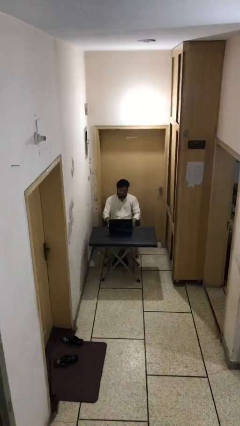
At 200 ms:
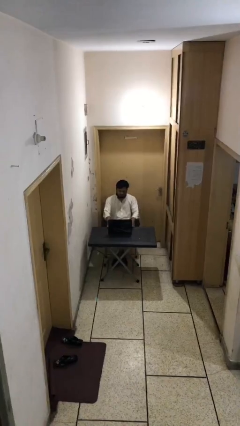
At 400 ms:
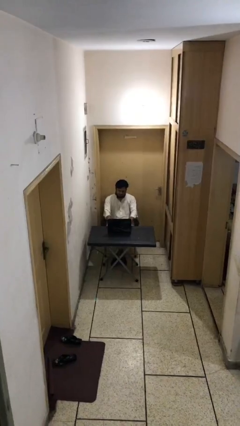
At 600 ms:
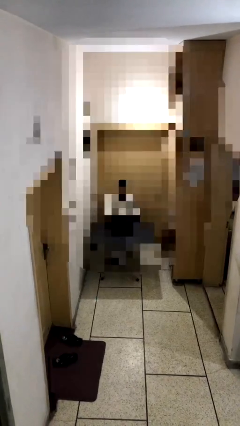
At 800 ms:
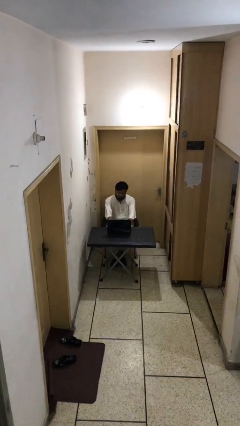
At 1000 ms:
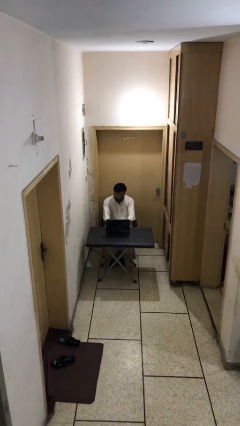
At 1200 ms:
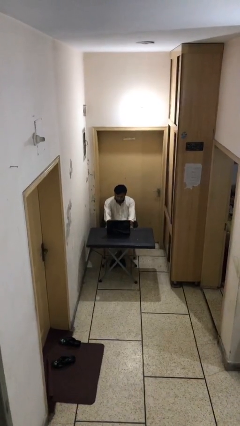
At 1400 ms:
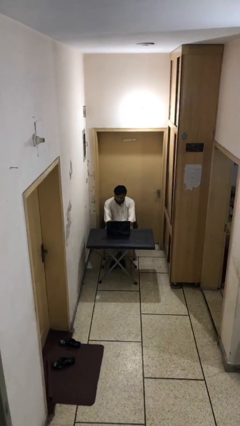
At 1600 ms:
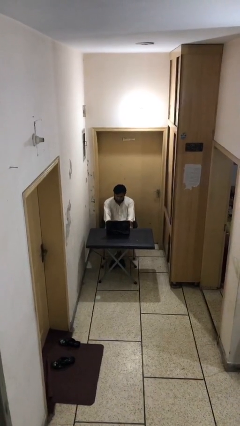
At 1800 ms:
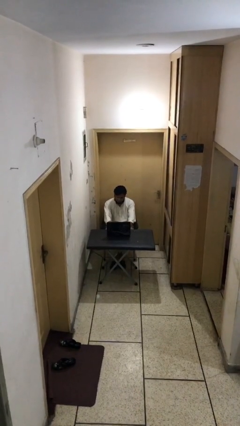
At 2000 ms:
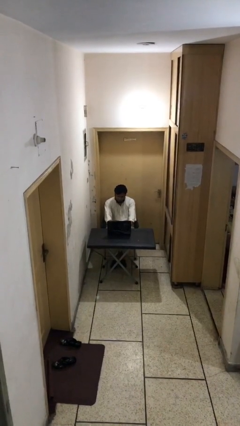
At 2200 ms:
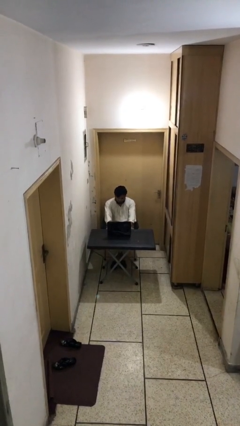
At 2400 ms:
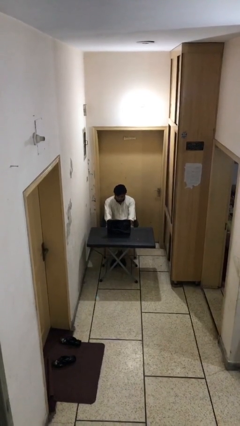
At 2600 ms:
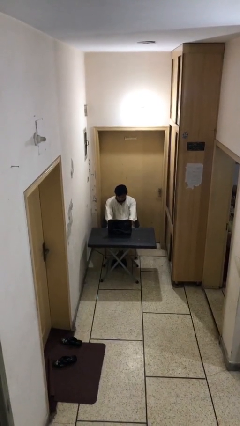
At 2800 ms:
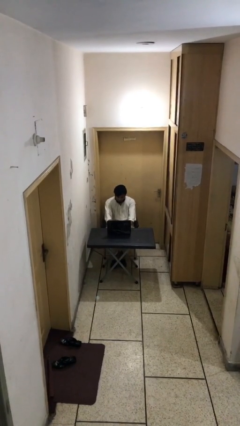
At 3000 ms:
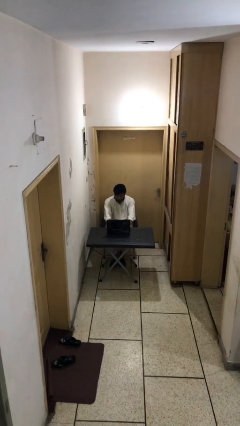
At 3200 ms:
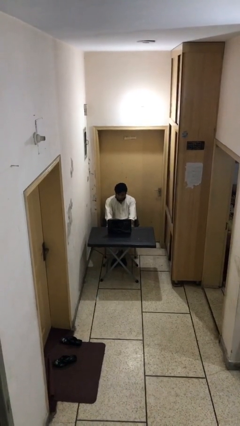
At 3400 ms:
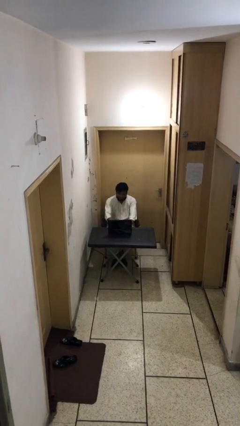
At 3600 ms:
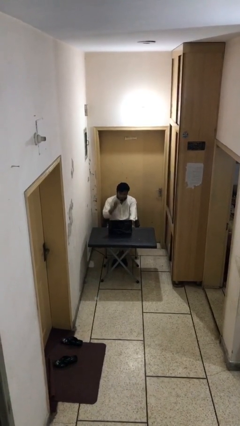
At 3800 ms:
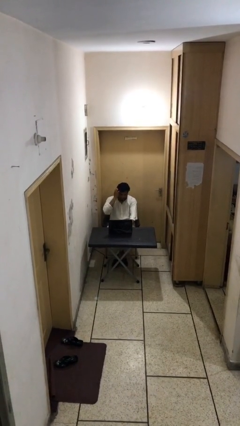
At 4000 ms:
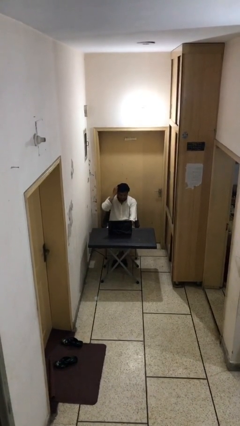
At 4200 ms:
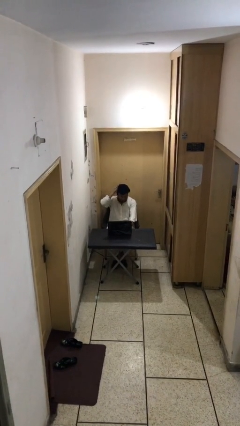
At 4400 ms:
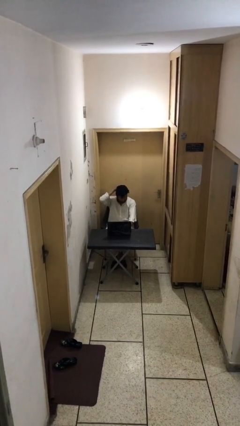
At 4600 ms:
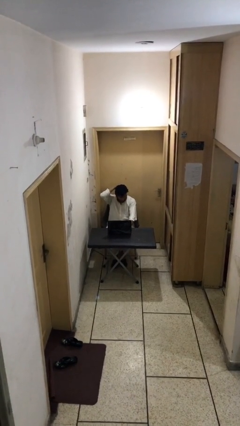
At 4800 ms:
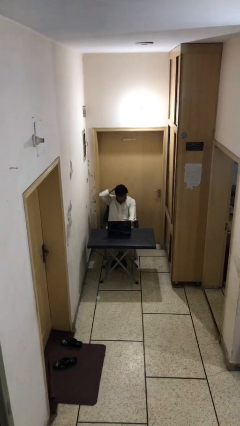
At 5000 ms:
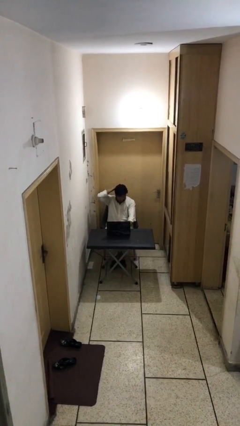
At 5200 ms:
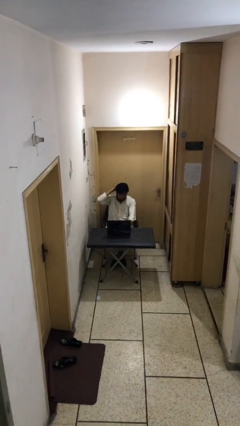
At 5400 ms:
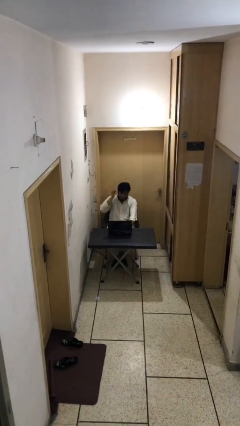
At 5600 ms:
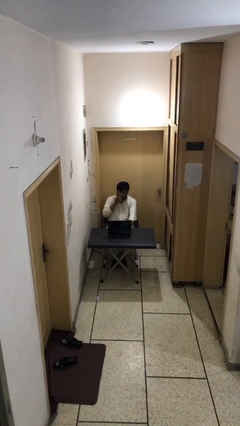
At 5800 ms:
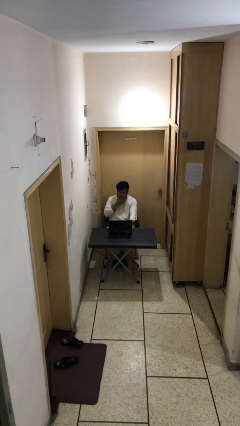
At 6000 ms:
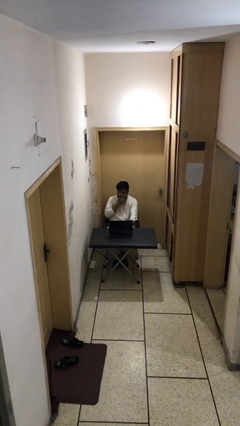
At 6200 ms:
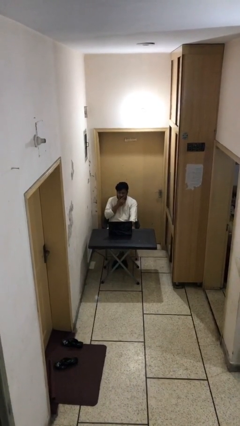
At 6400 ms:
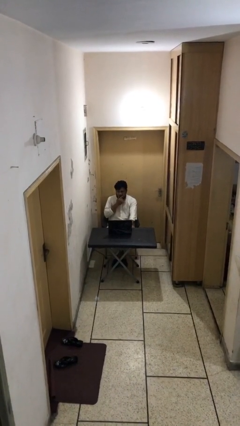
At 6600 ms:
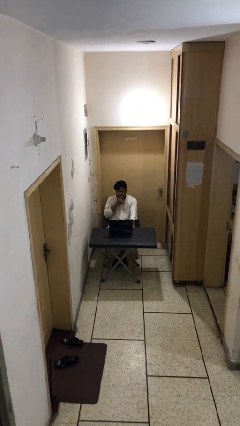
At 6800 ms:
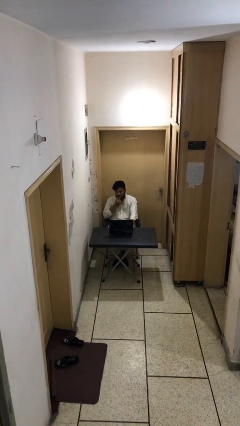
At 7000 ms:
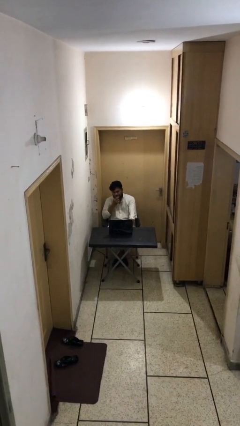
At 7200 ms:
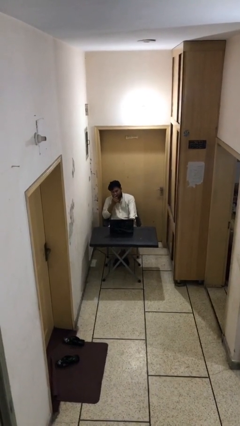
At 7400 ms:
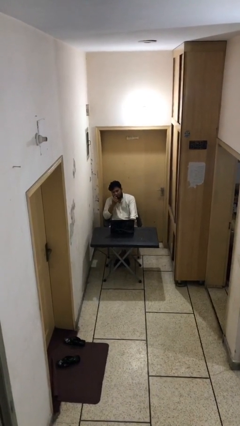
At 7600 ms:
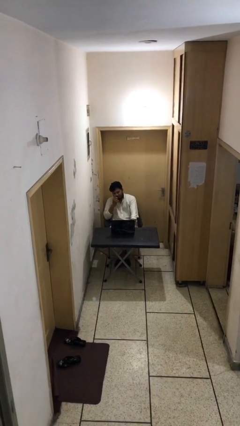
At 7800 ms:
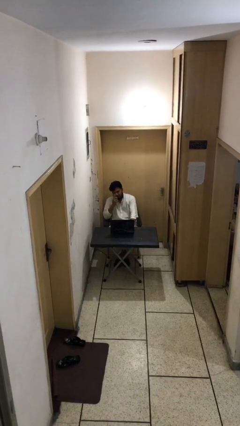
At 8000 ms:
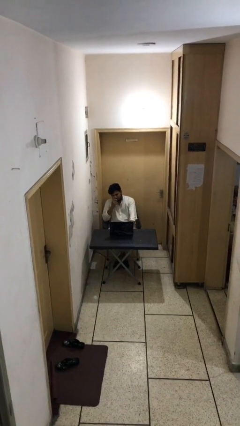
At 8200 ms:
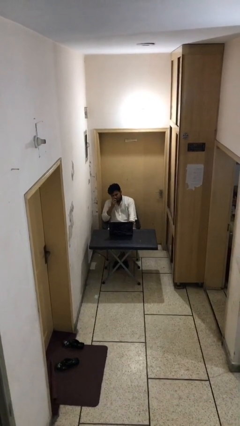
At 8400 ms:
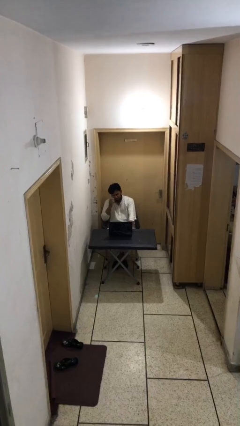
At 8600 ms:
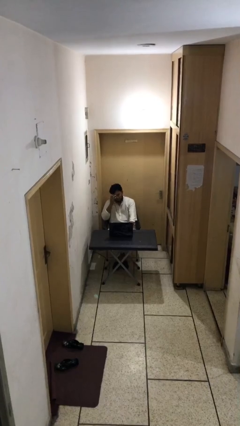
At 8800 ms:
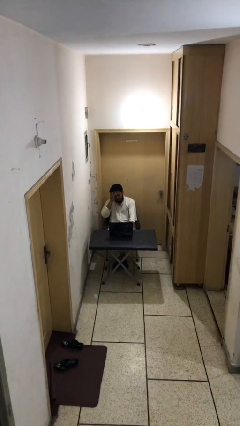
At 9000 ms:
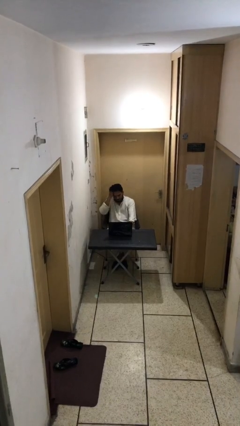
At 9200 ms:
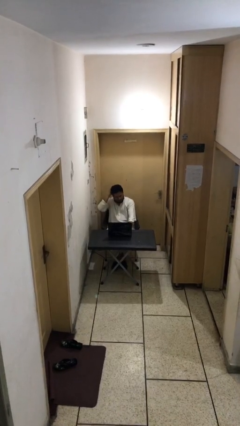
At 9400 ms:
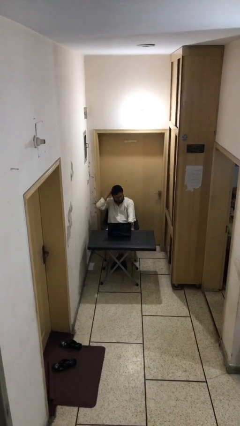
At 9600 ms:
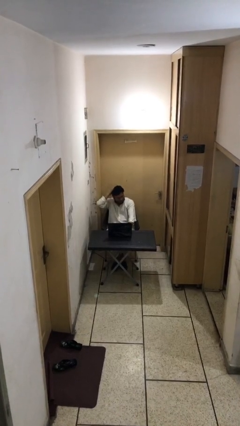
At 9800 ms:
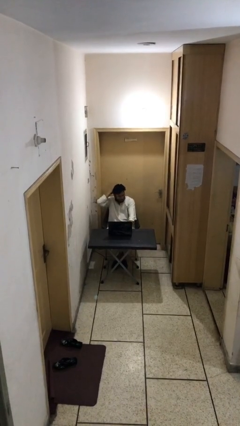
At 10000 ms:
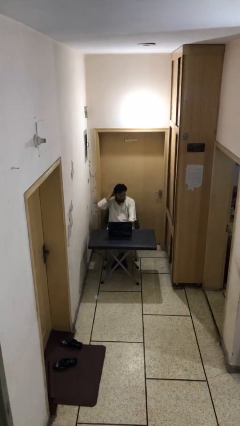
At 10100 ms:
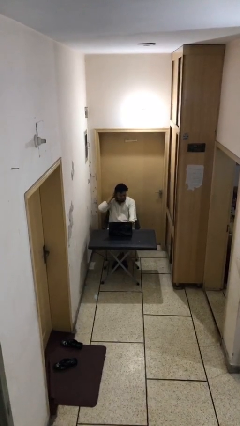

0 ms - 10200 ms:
person interacts with laptop

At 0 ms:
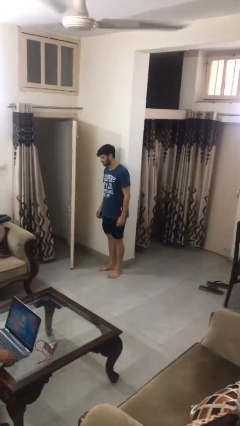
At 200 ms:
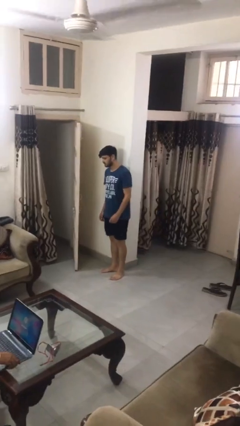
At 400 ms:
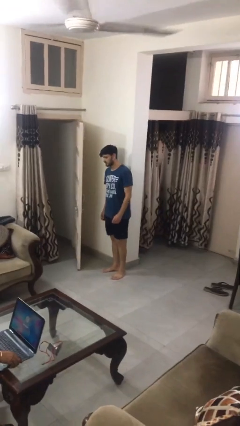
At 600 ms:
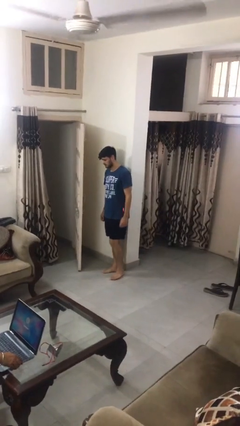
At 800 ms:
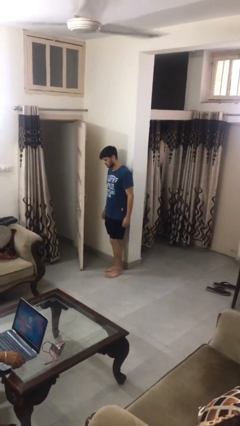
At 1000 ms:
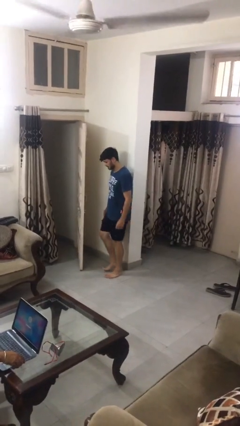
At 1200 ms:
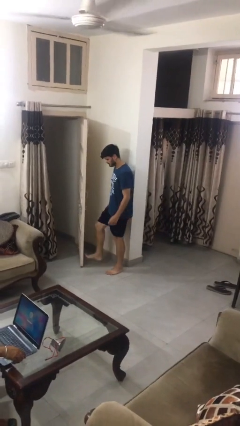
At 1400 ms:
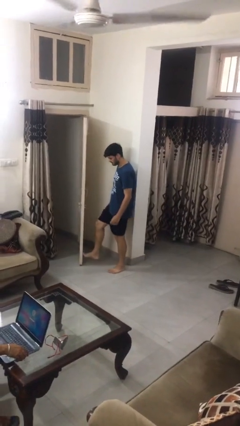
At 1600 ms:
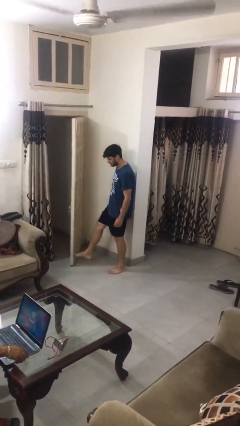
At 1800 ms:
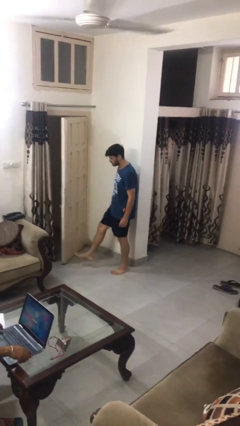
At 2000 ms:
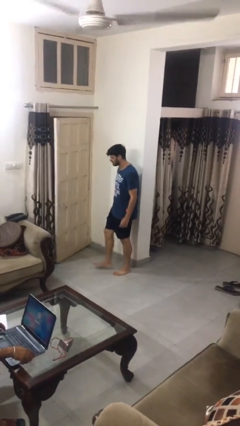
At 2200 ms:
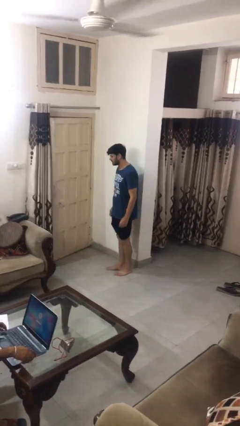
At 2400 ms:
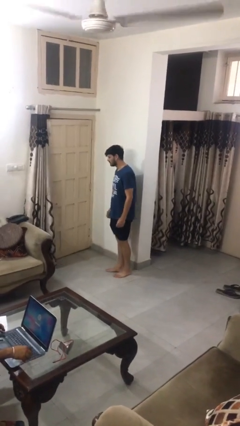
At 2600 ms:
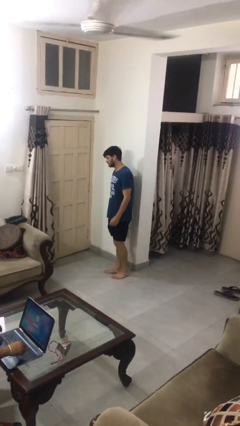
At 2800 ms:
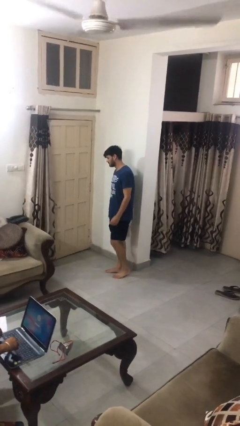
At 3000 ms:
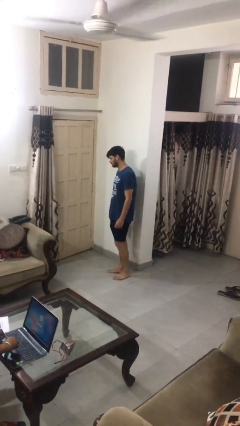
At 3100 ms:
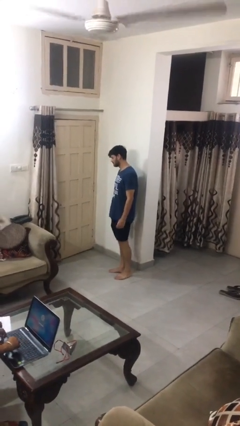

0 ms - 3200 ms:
person closes door with foot

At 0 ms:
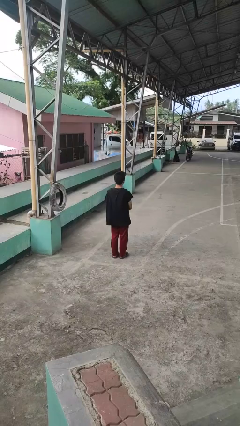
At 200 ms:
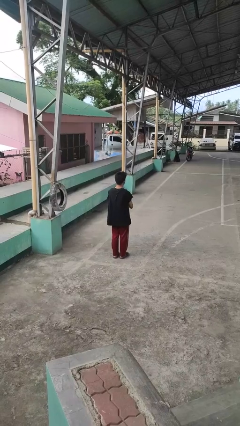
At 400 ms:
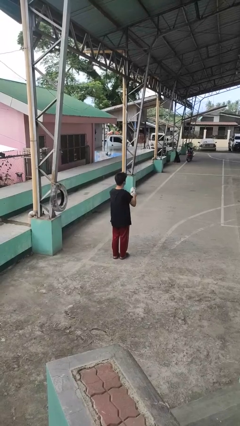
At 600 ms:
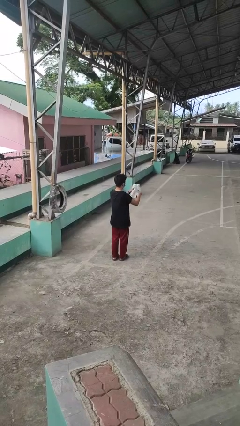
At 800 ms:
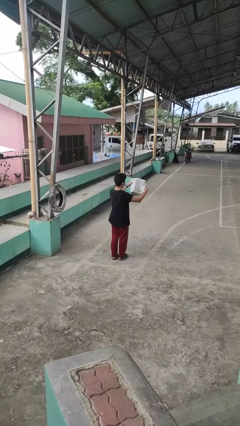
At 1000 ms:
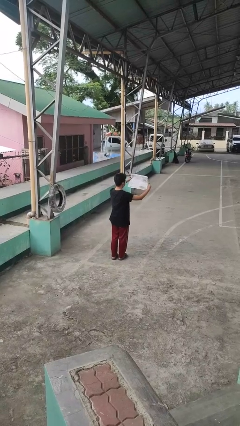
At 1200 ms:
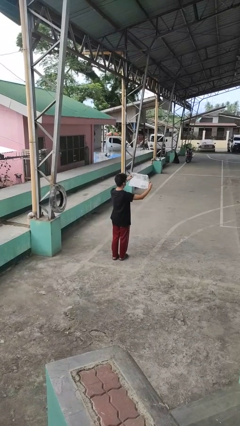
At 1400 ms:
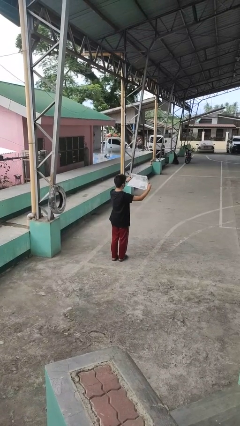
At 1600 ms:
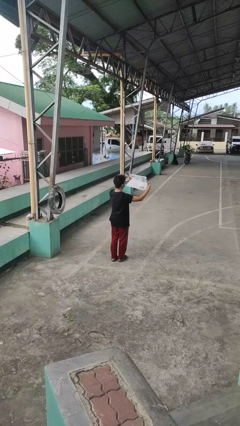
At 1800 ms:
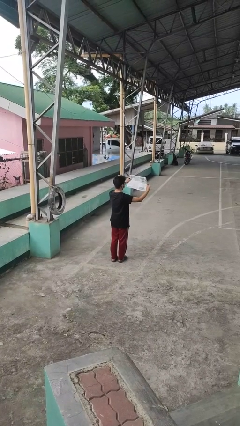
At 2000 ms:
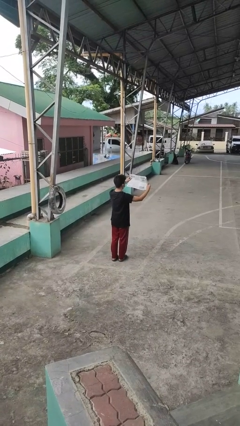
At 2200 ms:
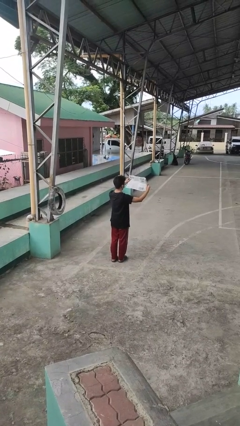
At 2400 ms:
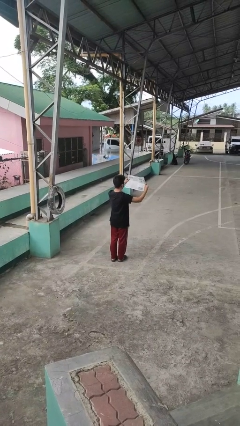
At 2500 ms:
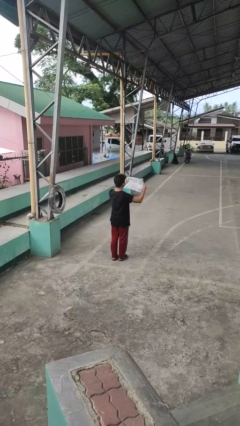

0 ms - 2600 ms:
person reads newspaper

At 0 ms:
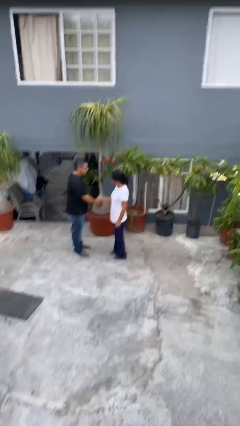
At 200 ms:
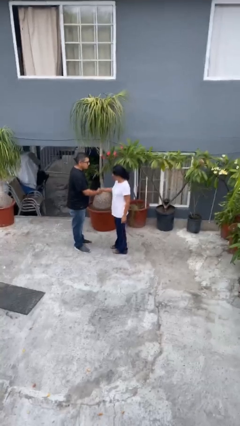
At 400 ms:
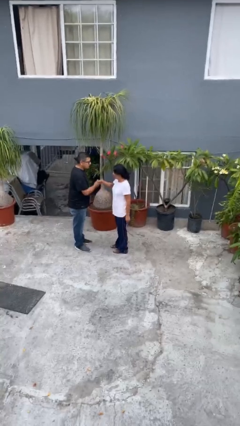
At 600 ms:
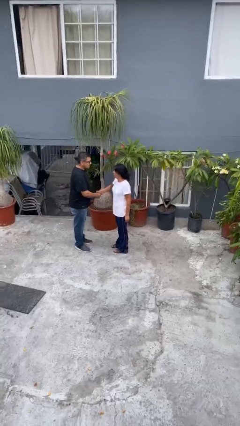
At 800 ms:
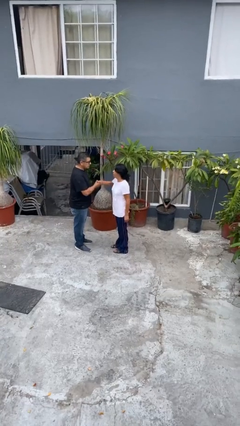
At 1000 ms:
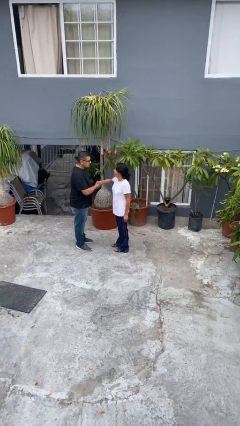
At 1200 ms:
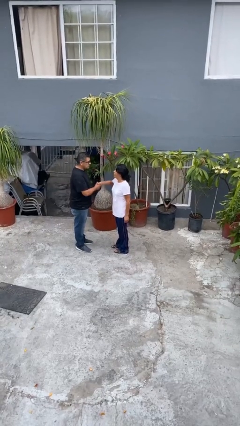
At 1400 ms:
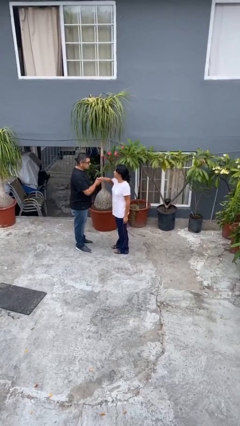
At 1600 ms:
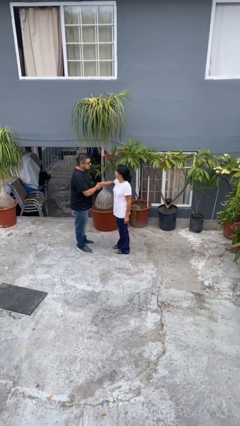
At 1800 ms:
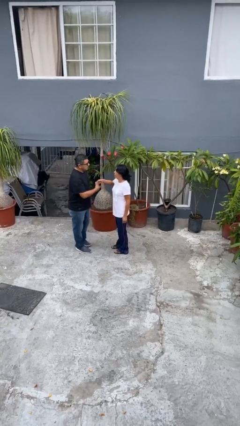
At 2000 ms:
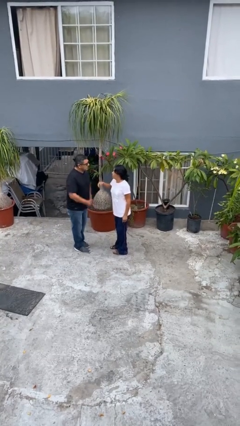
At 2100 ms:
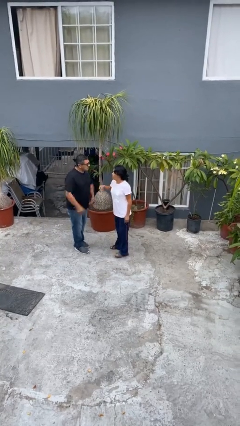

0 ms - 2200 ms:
person shakes hand
